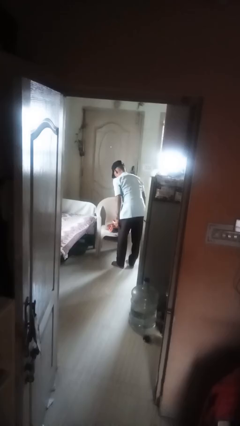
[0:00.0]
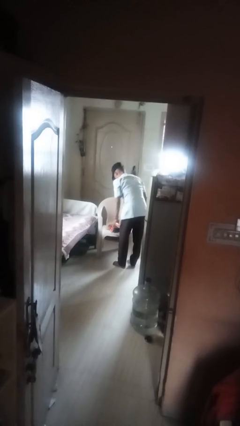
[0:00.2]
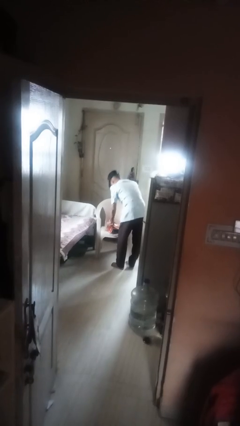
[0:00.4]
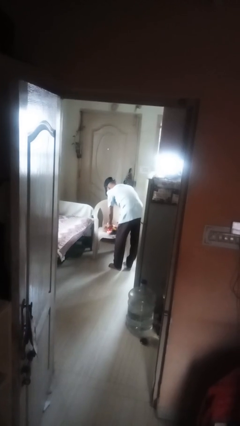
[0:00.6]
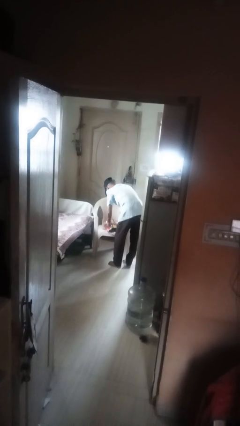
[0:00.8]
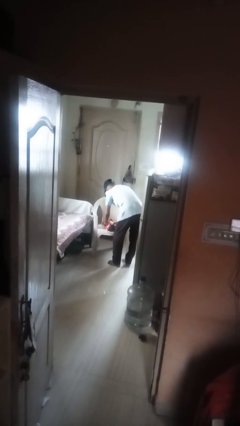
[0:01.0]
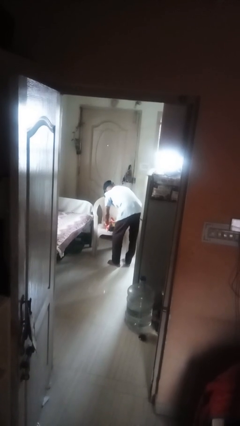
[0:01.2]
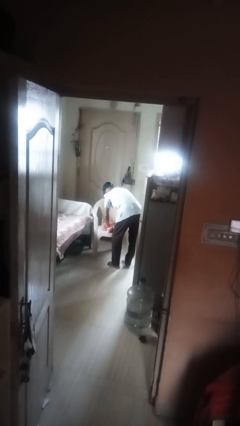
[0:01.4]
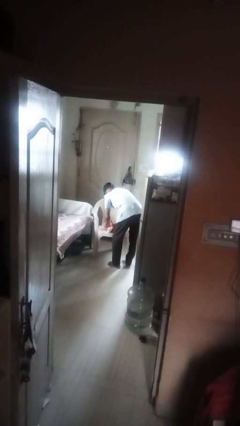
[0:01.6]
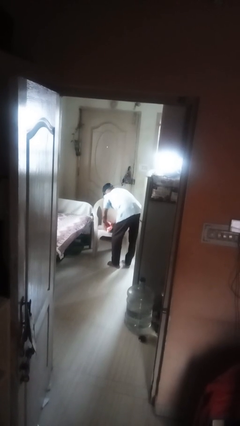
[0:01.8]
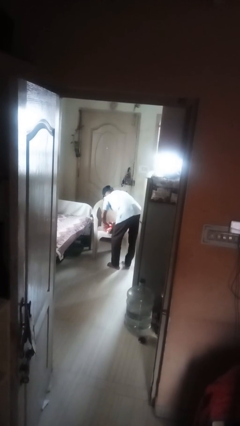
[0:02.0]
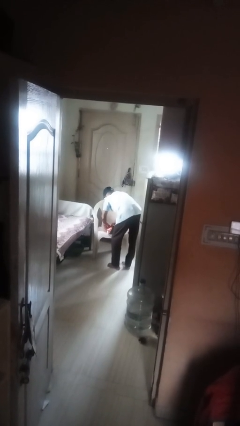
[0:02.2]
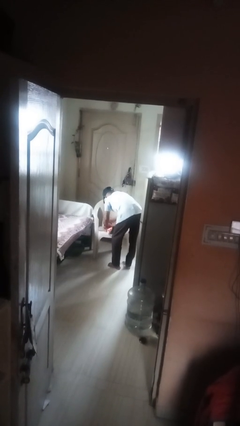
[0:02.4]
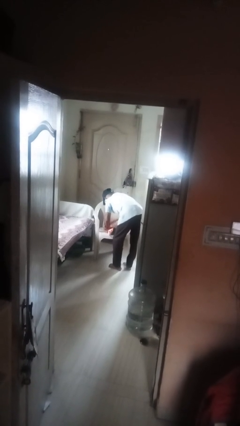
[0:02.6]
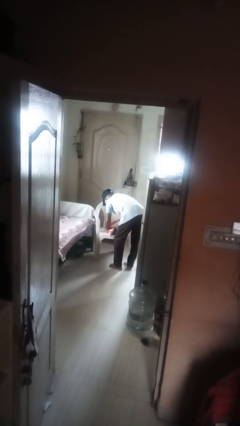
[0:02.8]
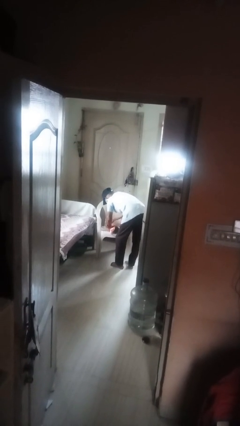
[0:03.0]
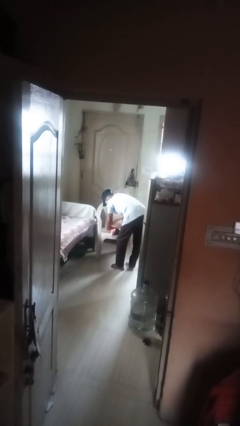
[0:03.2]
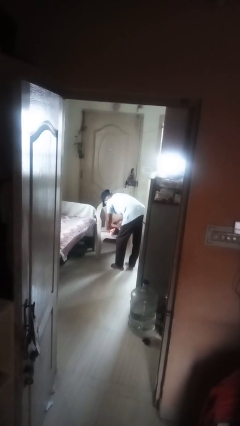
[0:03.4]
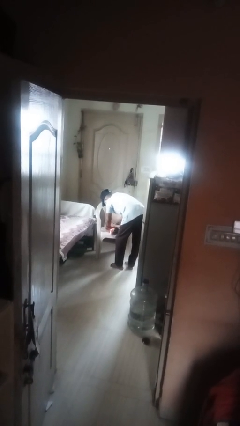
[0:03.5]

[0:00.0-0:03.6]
person wraps box

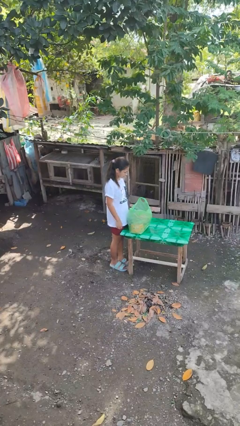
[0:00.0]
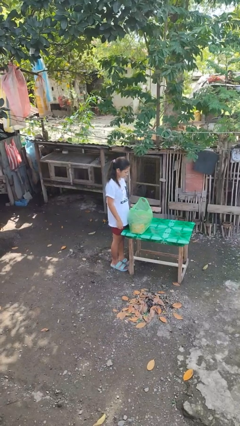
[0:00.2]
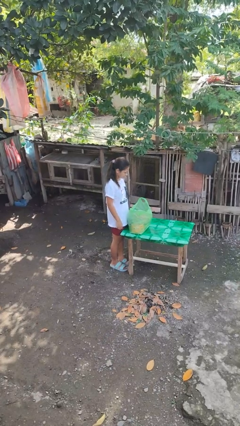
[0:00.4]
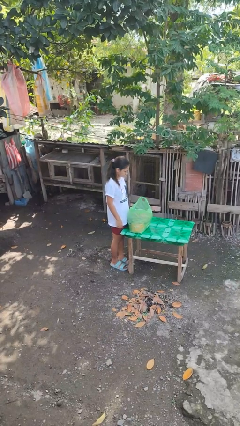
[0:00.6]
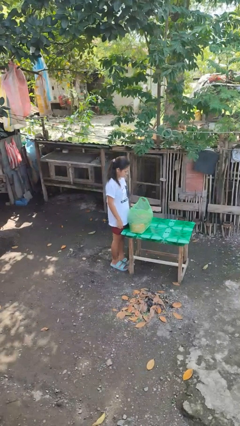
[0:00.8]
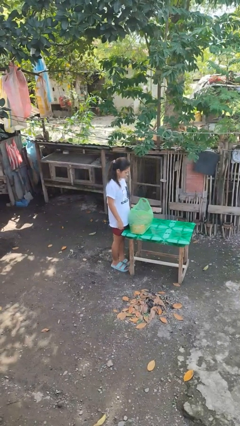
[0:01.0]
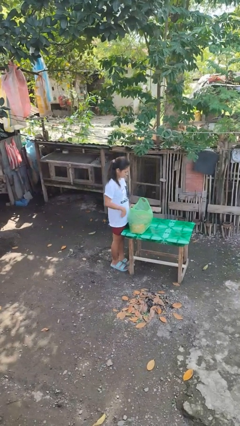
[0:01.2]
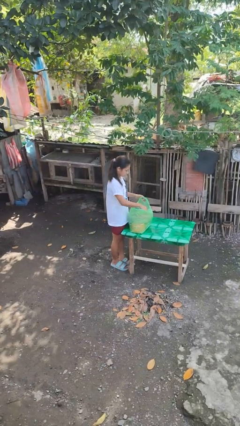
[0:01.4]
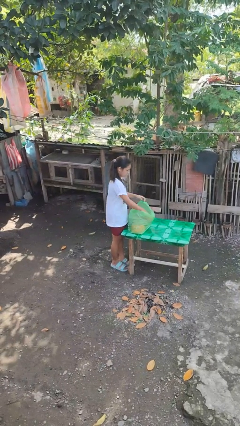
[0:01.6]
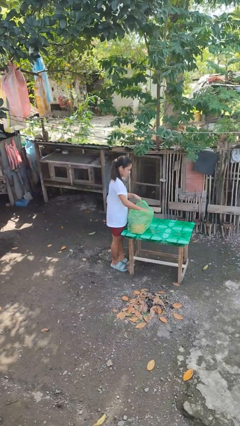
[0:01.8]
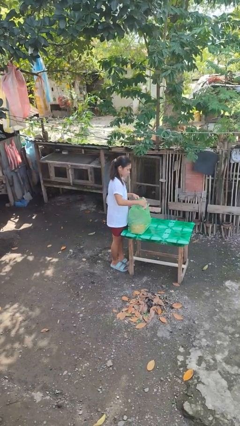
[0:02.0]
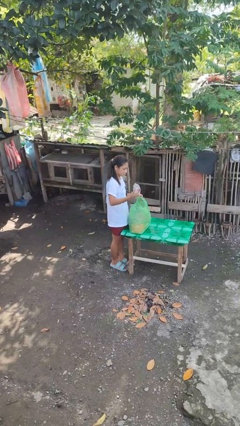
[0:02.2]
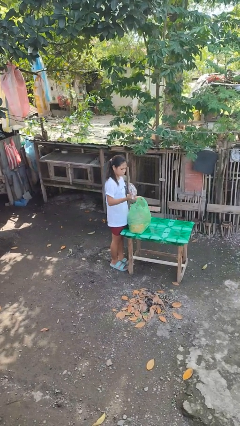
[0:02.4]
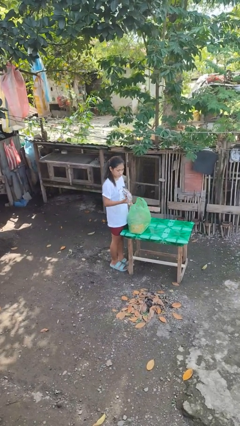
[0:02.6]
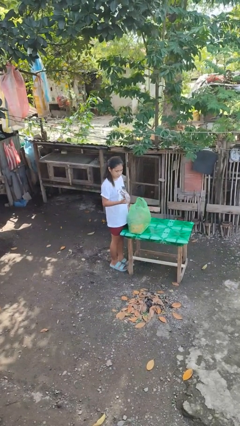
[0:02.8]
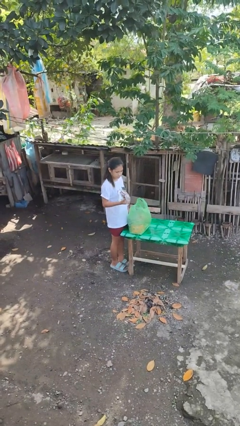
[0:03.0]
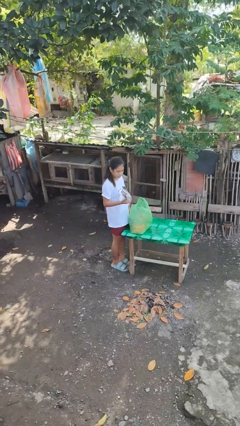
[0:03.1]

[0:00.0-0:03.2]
person takes object from bag

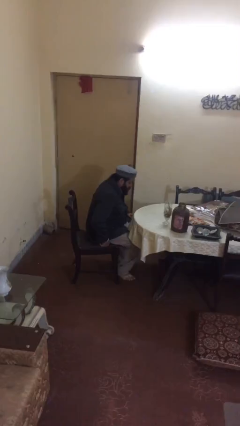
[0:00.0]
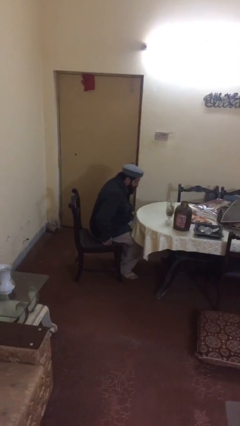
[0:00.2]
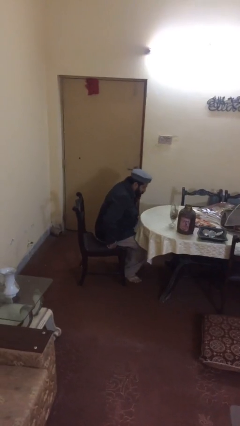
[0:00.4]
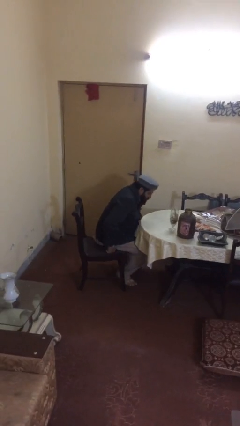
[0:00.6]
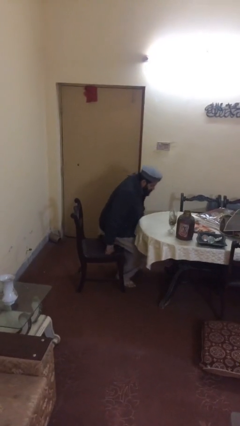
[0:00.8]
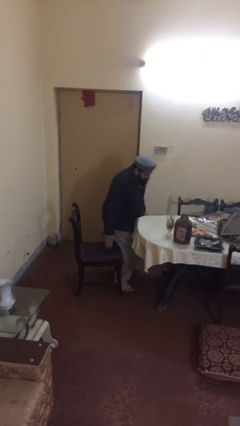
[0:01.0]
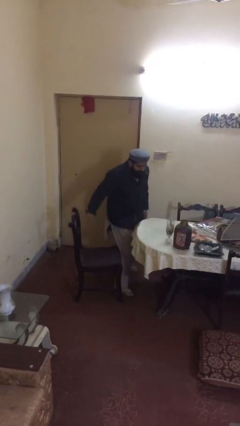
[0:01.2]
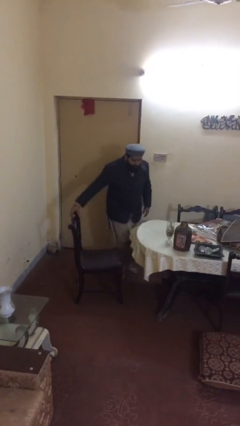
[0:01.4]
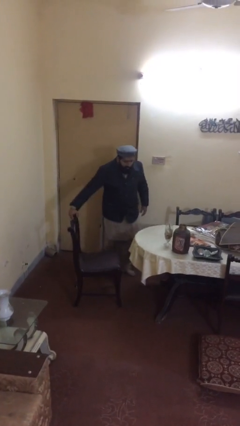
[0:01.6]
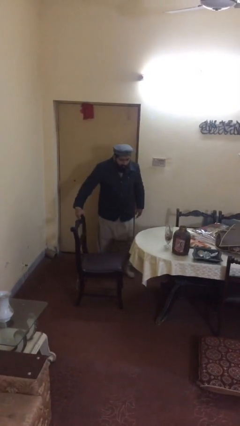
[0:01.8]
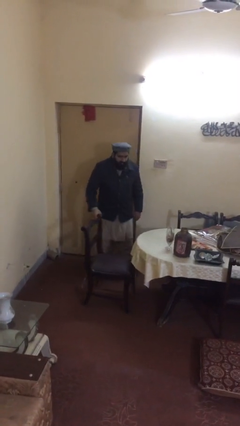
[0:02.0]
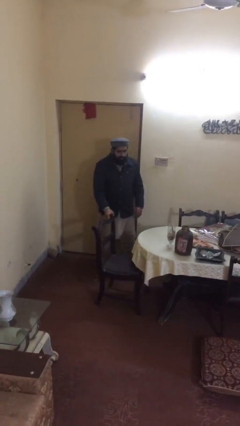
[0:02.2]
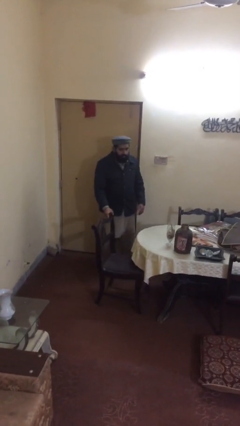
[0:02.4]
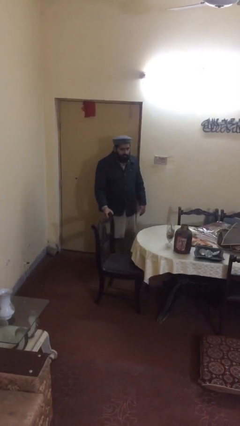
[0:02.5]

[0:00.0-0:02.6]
person stands up

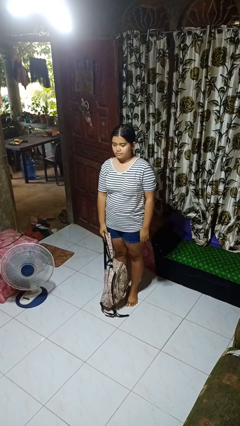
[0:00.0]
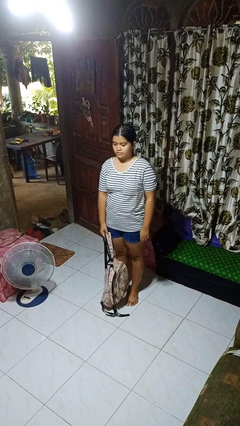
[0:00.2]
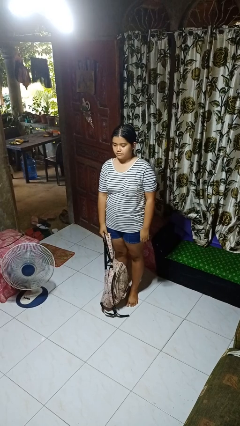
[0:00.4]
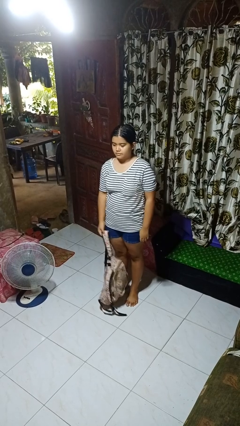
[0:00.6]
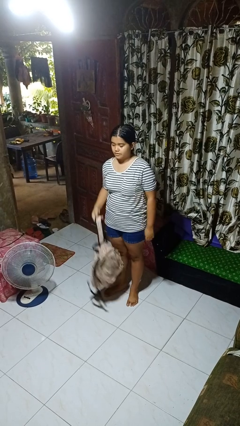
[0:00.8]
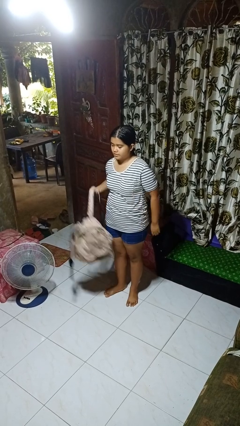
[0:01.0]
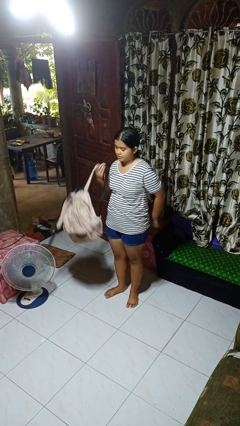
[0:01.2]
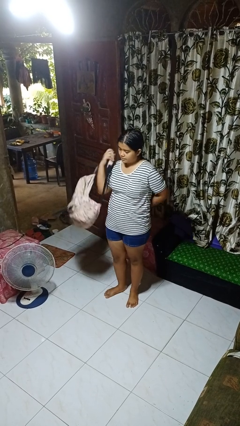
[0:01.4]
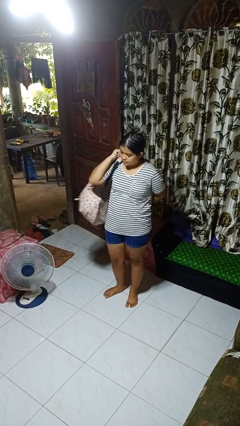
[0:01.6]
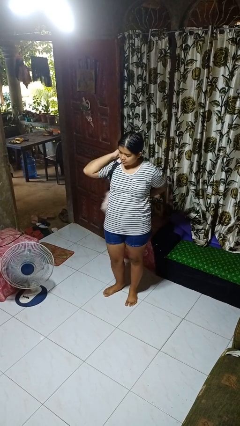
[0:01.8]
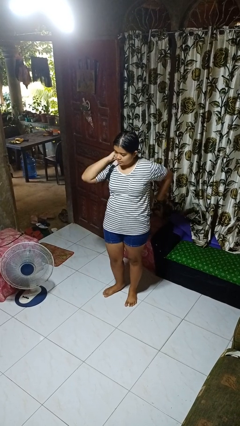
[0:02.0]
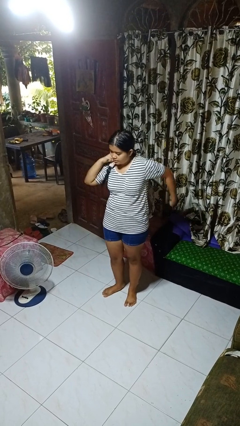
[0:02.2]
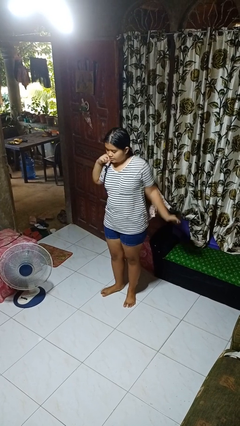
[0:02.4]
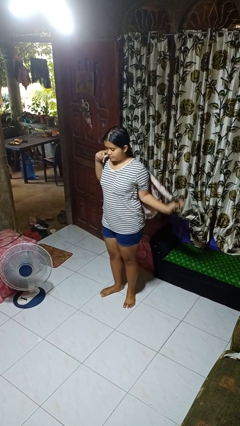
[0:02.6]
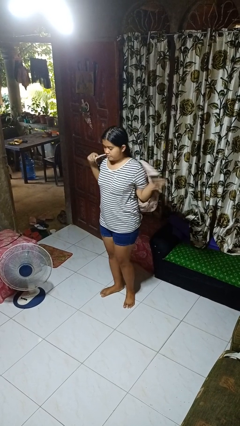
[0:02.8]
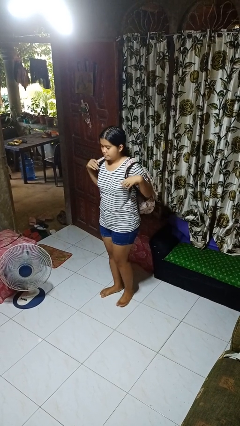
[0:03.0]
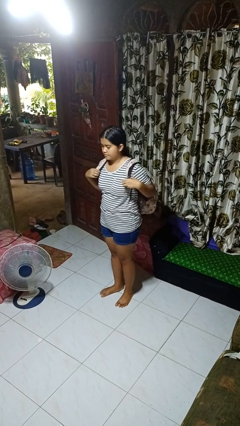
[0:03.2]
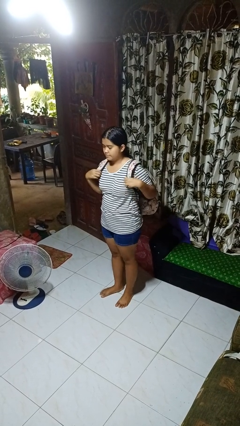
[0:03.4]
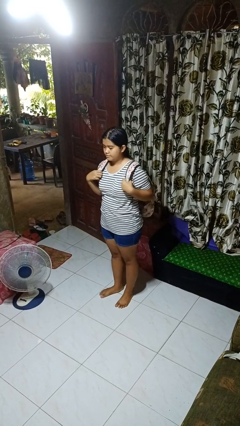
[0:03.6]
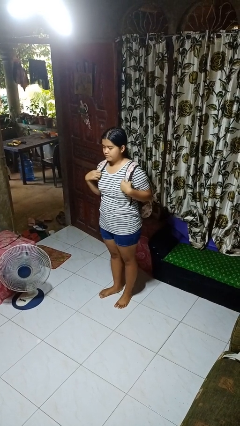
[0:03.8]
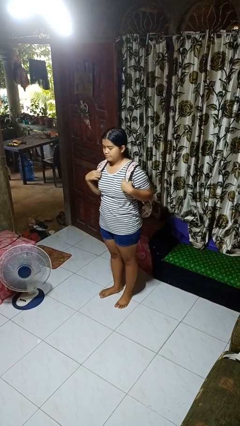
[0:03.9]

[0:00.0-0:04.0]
person puts on backpack

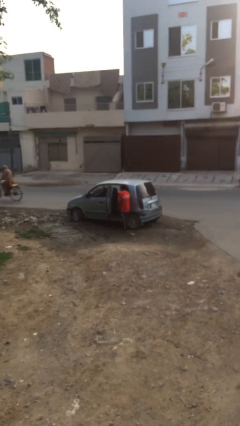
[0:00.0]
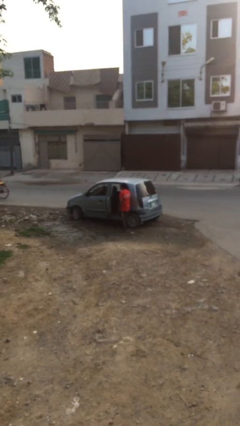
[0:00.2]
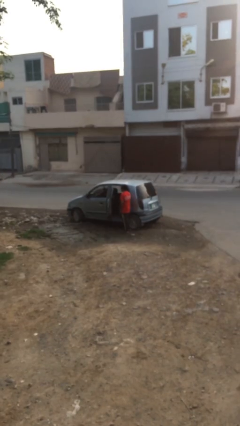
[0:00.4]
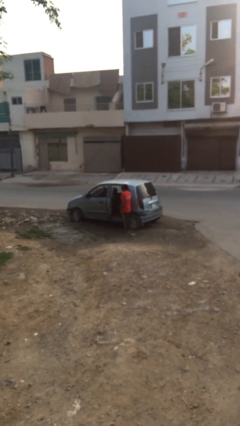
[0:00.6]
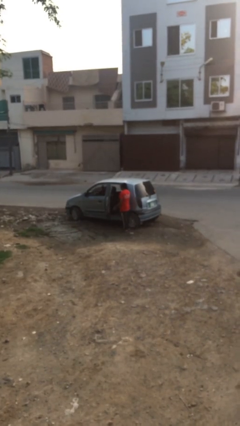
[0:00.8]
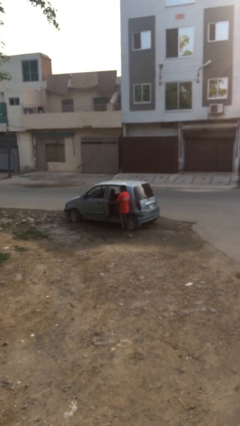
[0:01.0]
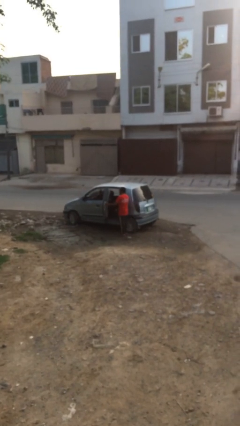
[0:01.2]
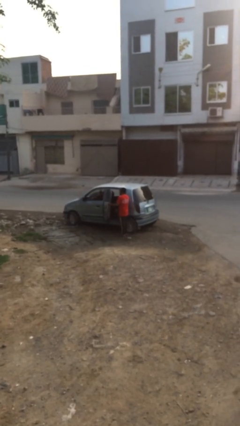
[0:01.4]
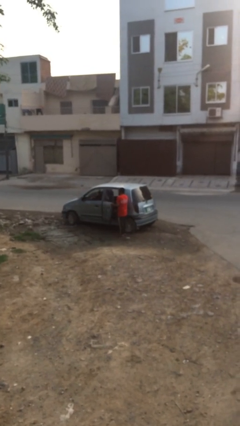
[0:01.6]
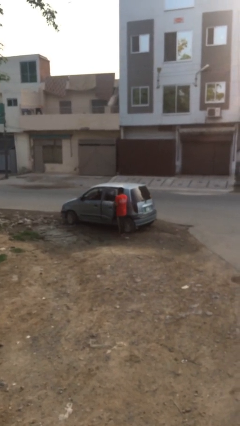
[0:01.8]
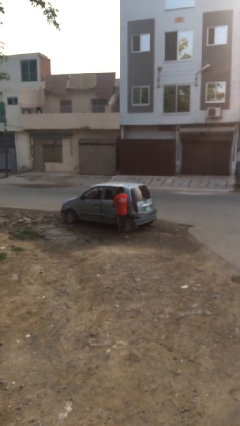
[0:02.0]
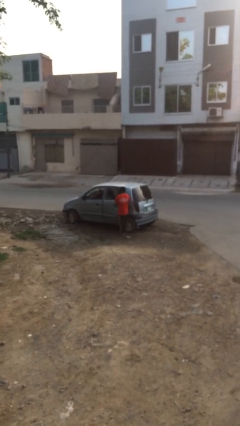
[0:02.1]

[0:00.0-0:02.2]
person closes car door

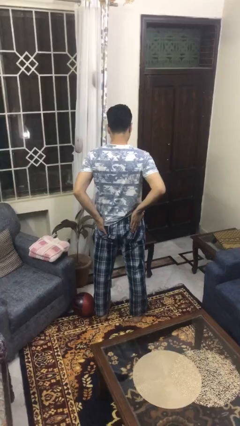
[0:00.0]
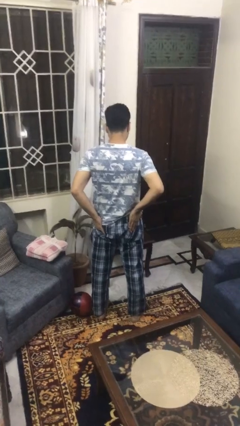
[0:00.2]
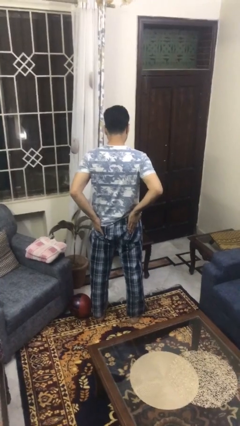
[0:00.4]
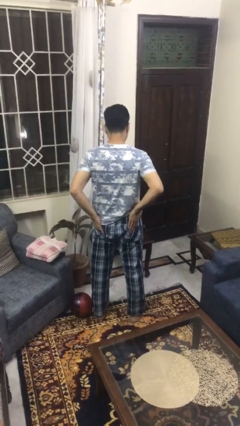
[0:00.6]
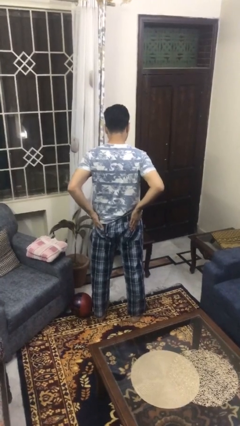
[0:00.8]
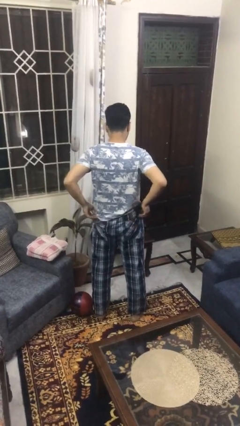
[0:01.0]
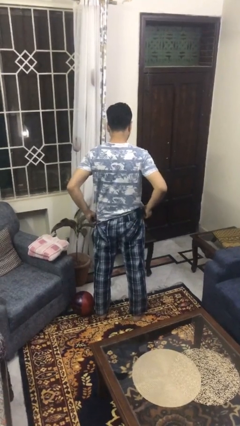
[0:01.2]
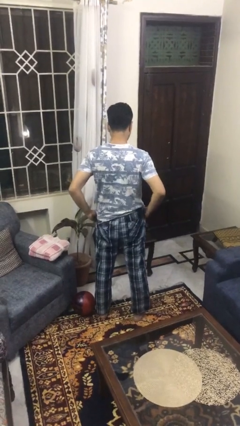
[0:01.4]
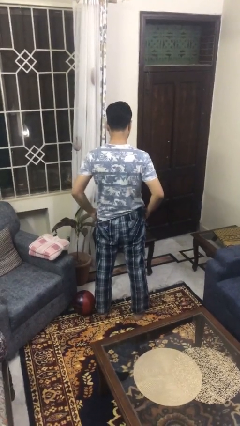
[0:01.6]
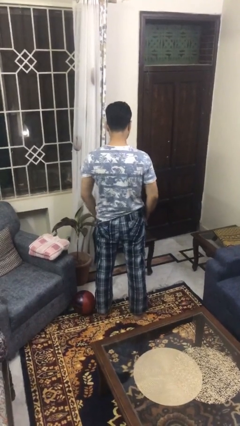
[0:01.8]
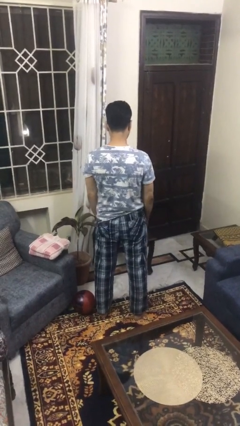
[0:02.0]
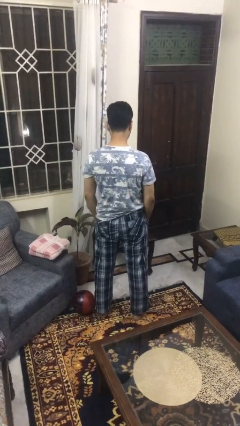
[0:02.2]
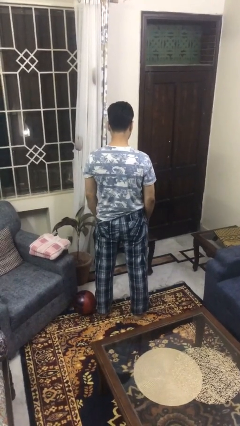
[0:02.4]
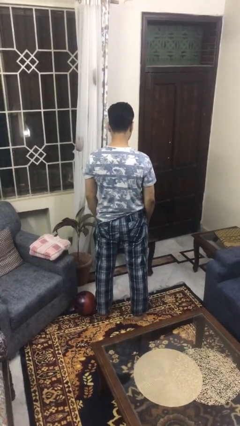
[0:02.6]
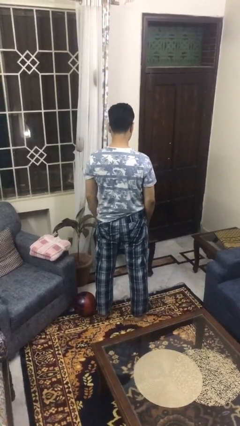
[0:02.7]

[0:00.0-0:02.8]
person puts hands in back pockets
